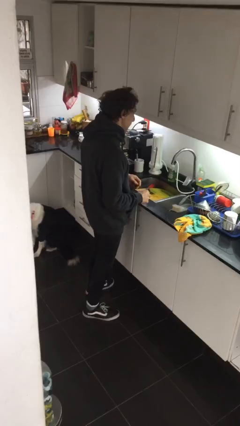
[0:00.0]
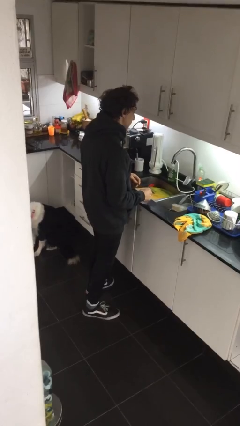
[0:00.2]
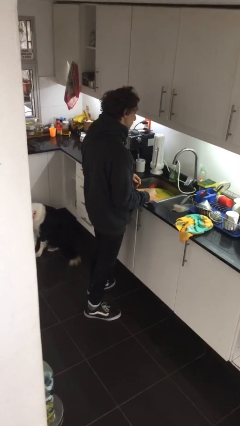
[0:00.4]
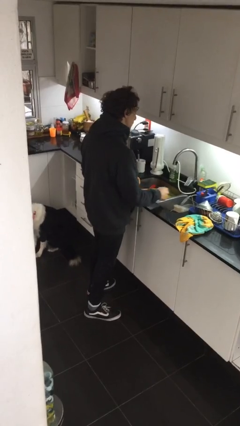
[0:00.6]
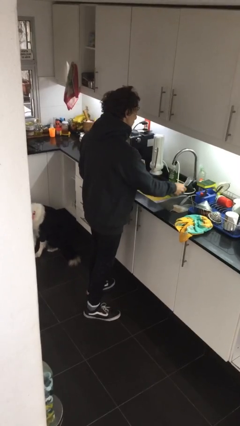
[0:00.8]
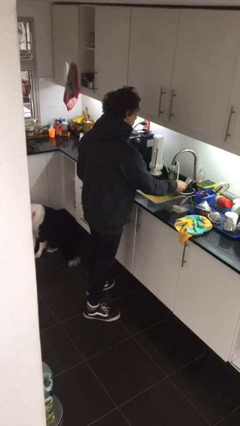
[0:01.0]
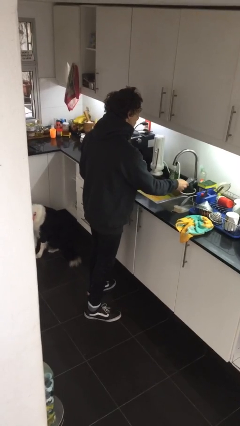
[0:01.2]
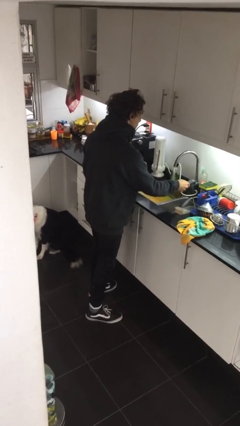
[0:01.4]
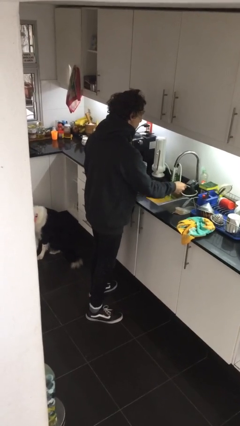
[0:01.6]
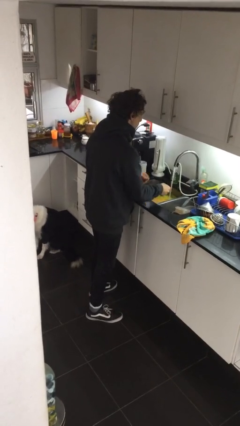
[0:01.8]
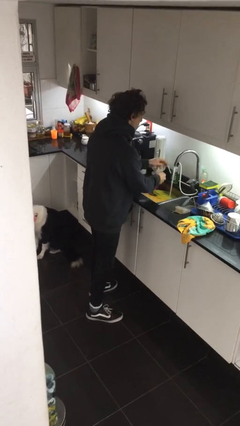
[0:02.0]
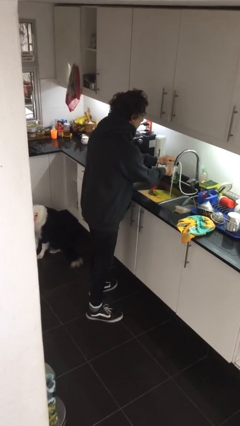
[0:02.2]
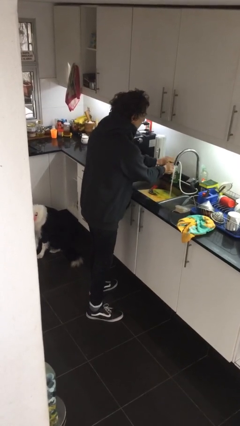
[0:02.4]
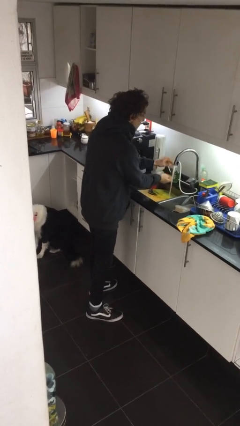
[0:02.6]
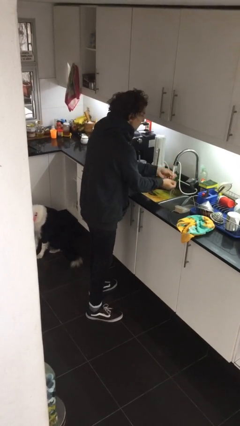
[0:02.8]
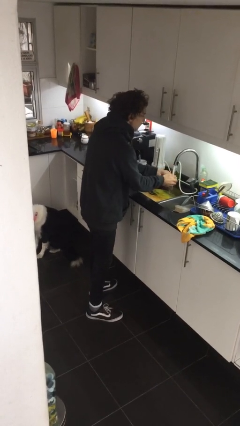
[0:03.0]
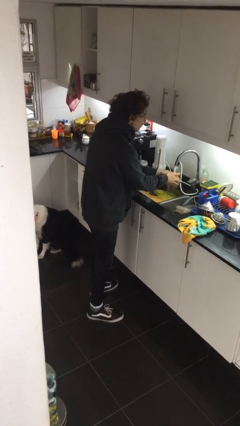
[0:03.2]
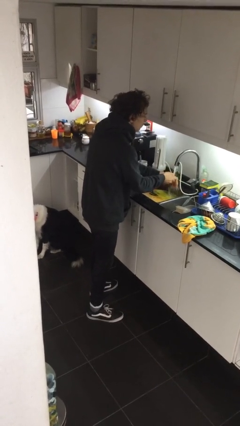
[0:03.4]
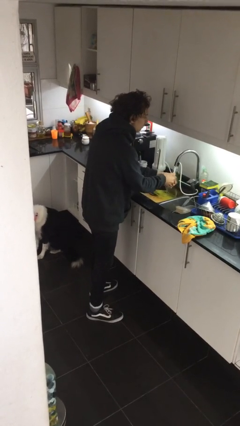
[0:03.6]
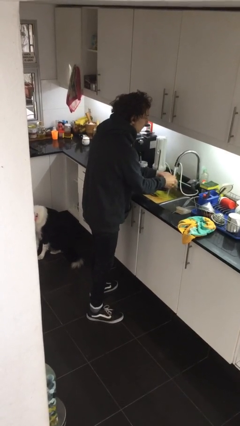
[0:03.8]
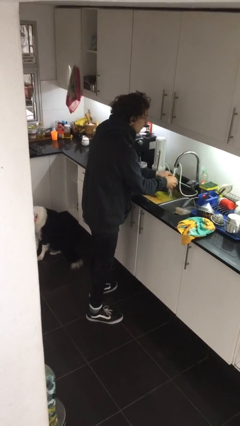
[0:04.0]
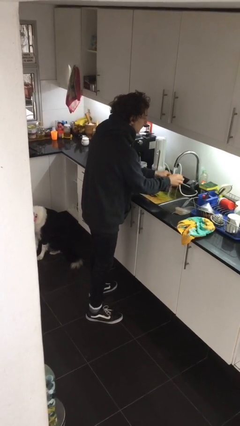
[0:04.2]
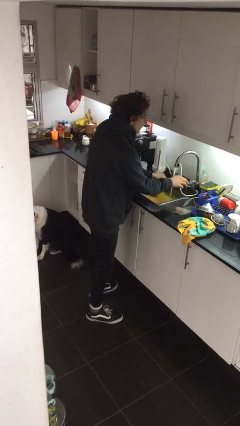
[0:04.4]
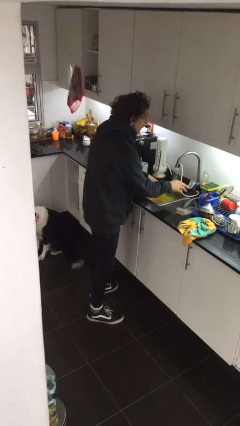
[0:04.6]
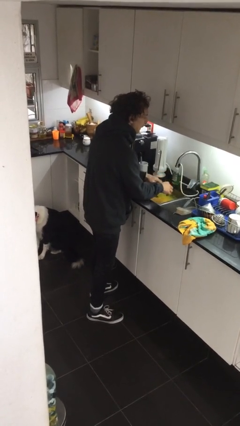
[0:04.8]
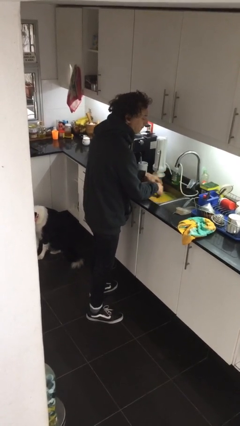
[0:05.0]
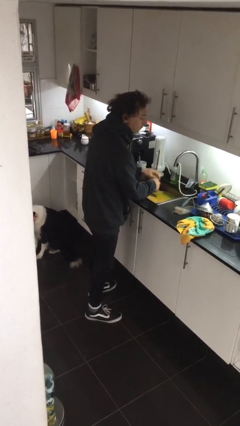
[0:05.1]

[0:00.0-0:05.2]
person washes hands

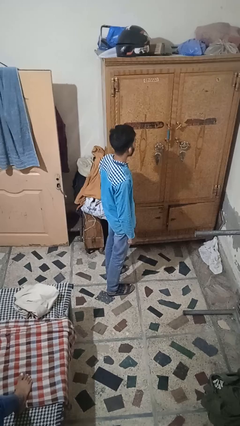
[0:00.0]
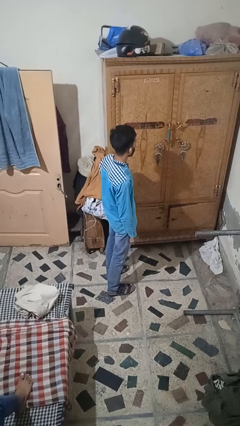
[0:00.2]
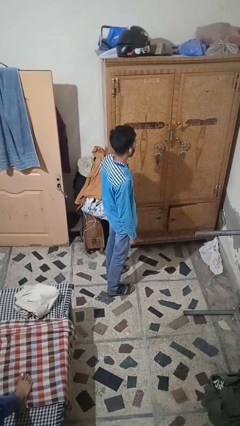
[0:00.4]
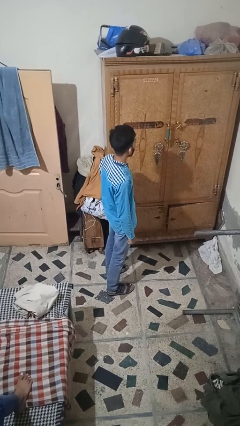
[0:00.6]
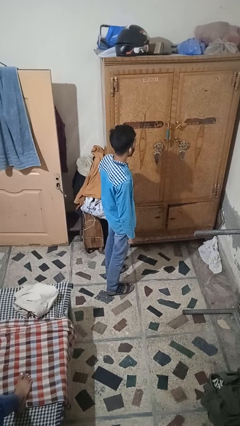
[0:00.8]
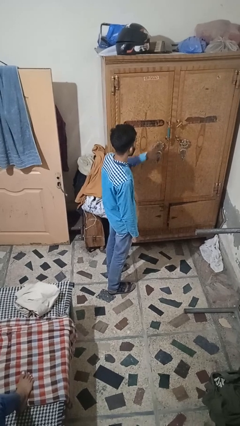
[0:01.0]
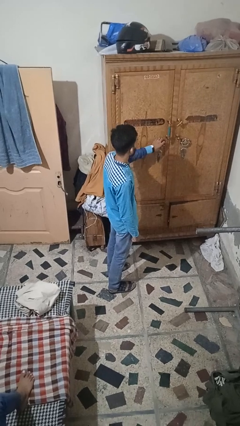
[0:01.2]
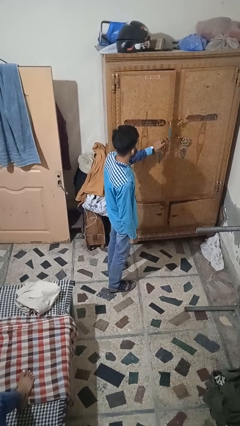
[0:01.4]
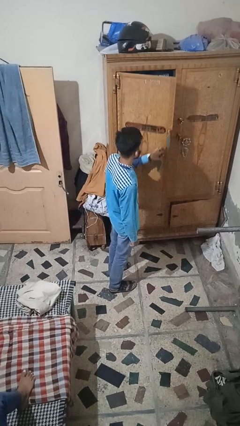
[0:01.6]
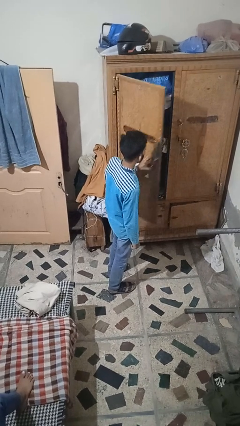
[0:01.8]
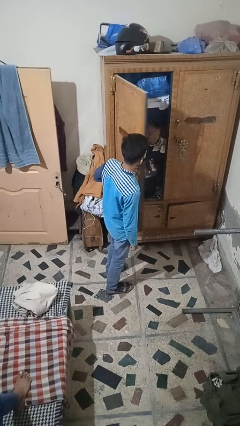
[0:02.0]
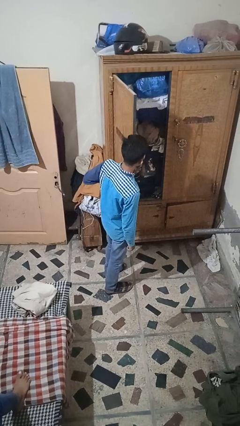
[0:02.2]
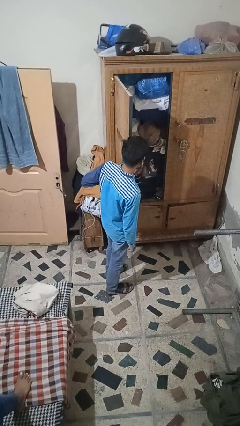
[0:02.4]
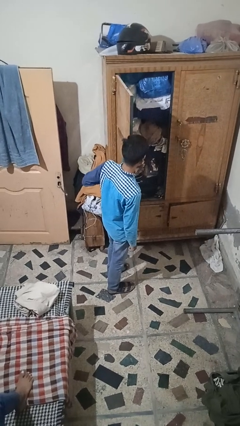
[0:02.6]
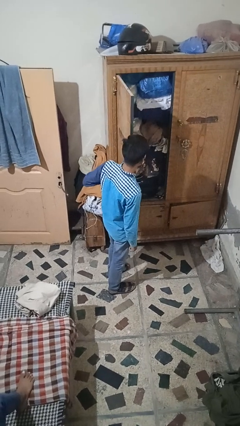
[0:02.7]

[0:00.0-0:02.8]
person opens closet door

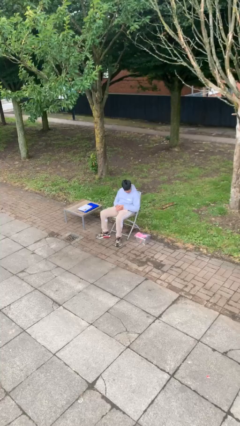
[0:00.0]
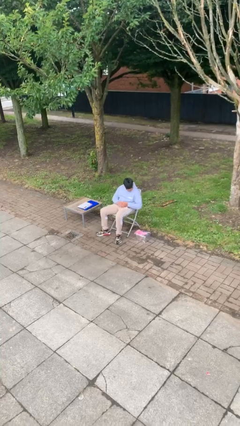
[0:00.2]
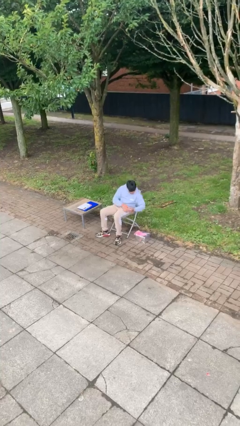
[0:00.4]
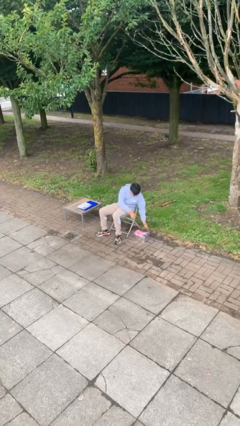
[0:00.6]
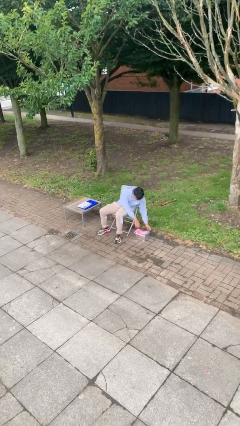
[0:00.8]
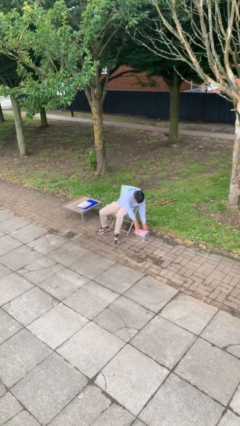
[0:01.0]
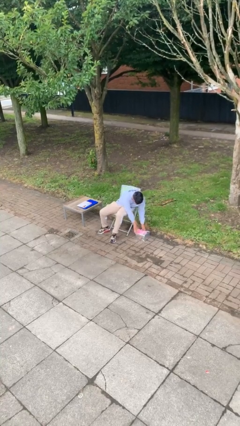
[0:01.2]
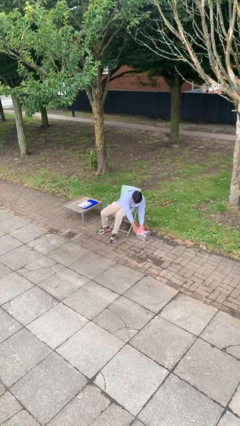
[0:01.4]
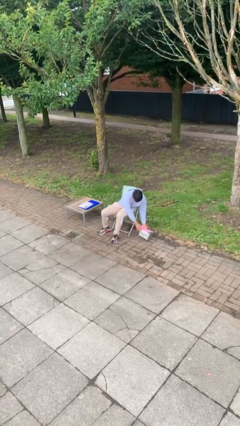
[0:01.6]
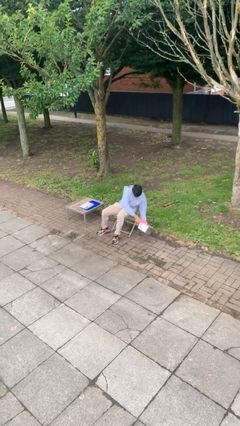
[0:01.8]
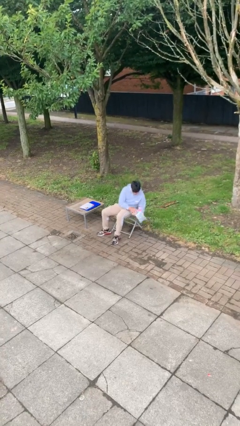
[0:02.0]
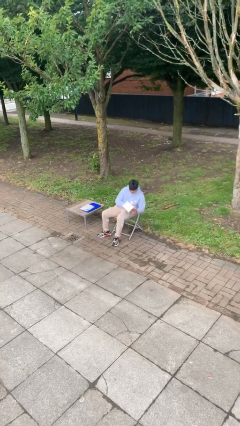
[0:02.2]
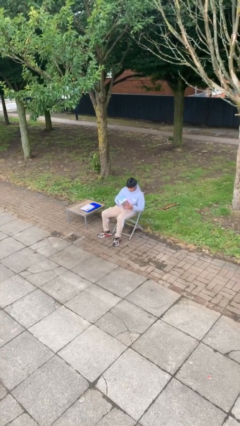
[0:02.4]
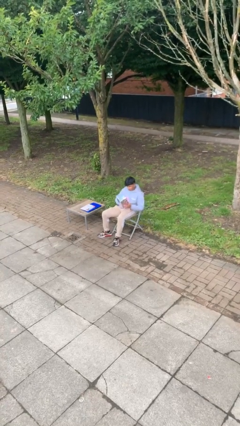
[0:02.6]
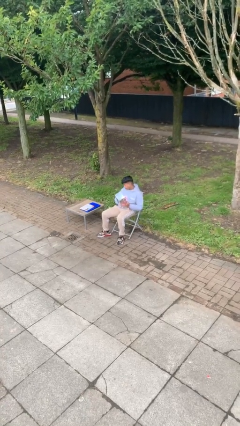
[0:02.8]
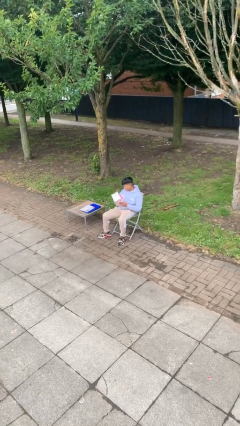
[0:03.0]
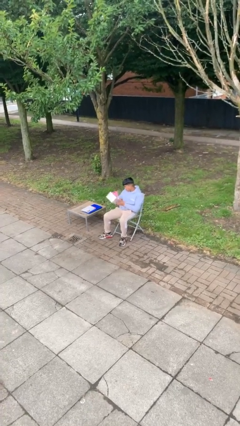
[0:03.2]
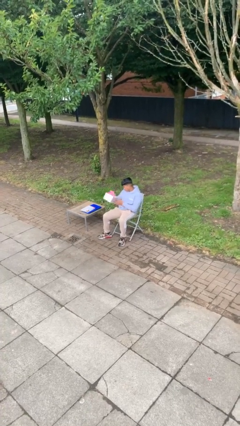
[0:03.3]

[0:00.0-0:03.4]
person picks up object from floor

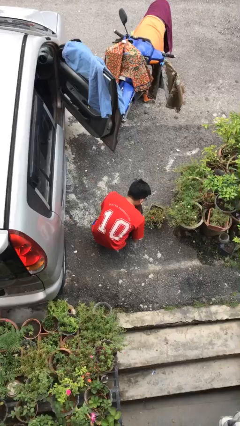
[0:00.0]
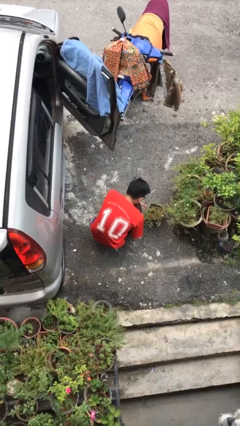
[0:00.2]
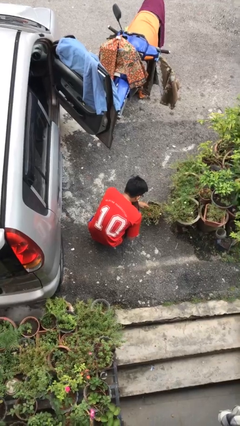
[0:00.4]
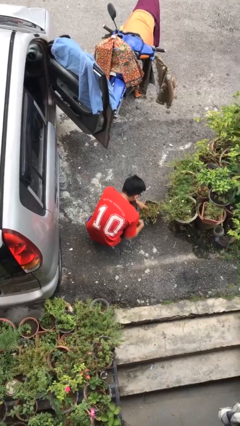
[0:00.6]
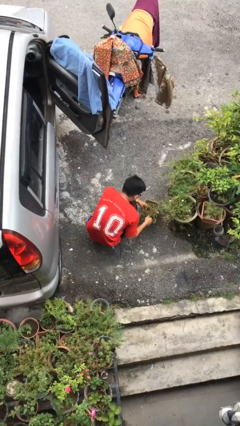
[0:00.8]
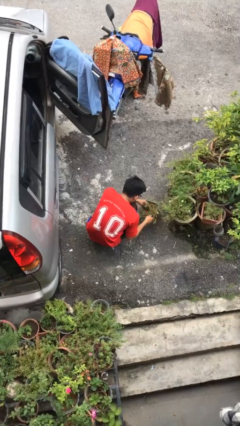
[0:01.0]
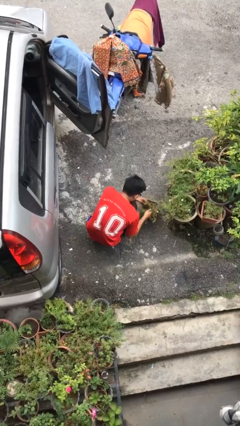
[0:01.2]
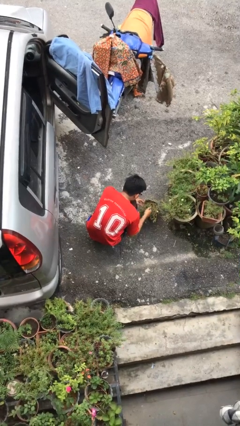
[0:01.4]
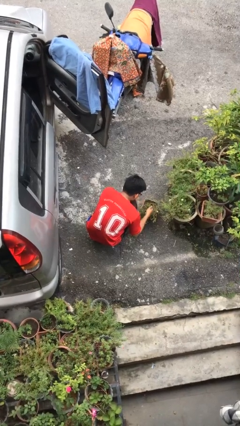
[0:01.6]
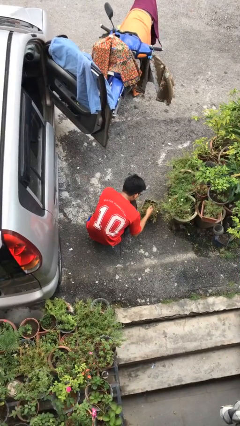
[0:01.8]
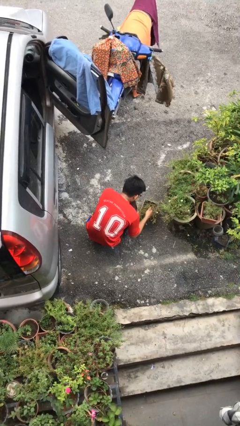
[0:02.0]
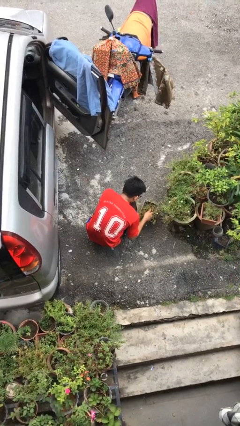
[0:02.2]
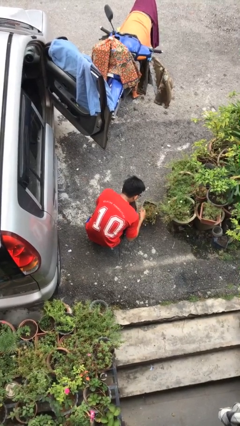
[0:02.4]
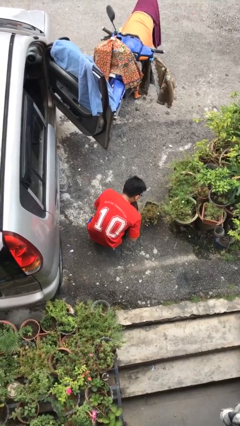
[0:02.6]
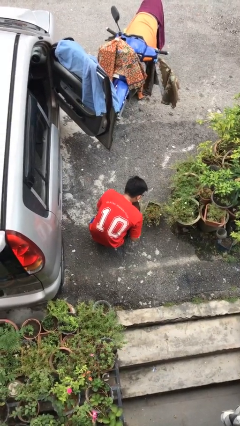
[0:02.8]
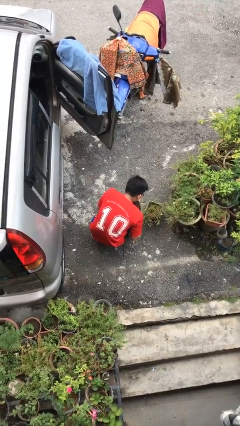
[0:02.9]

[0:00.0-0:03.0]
person arranges flowers in vase

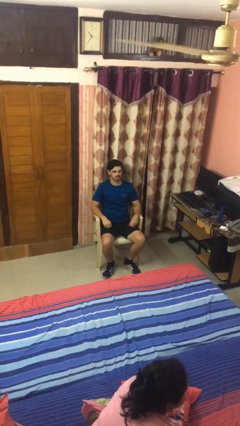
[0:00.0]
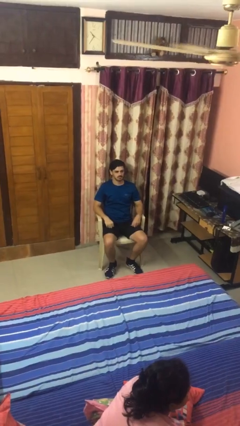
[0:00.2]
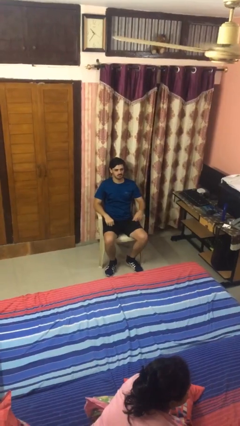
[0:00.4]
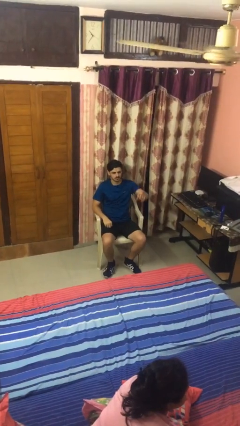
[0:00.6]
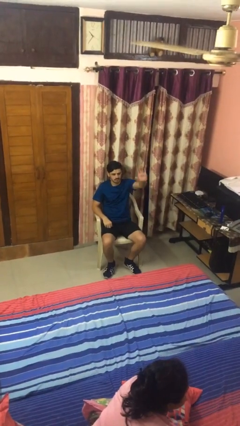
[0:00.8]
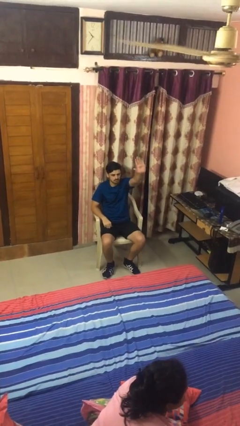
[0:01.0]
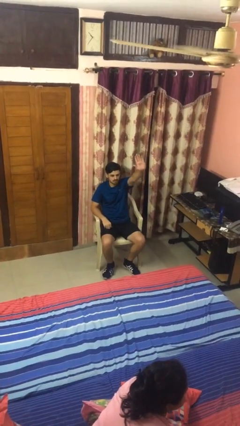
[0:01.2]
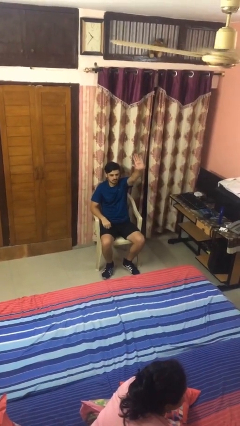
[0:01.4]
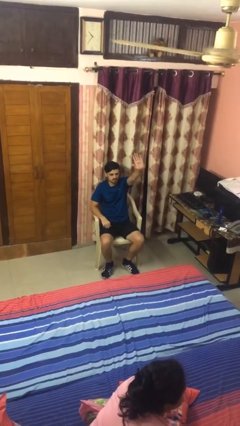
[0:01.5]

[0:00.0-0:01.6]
person gestures raise hand

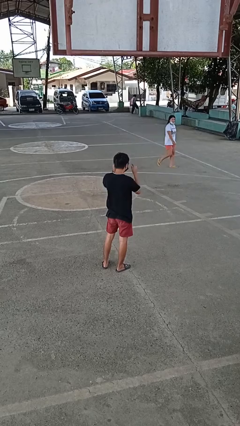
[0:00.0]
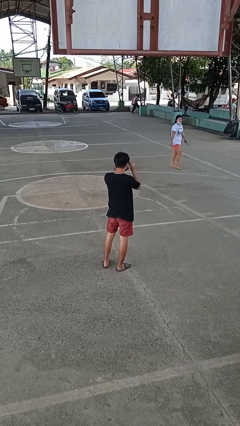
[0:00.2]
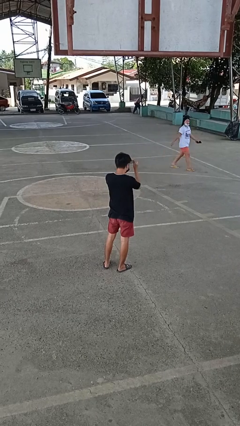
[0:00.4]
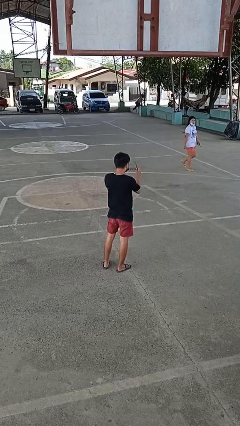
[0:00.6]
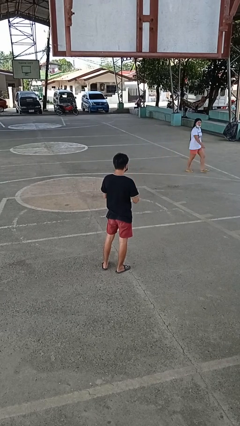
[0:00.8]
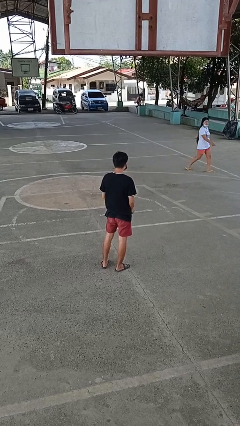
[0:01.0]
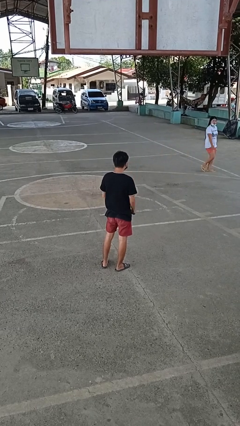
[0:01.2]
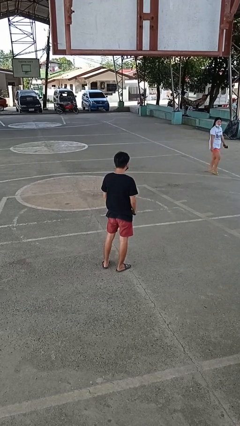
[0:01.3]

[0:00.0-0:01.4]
person takes off glasses
